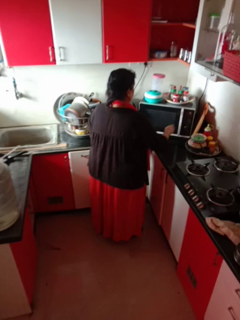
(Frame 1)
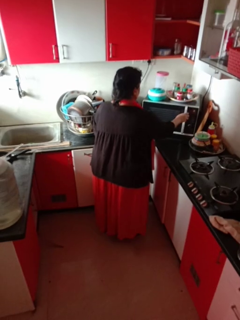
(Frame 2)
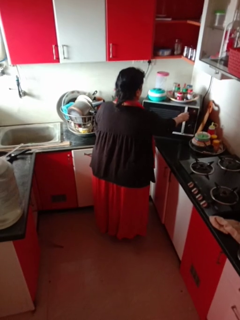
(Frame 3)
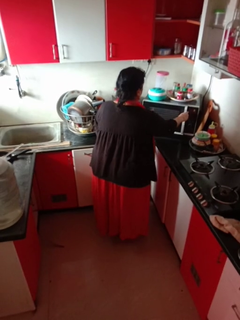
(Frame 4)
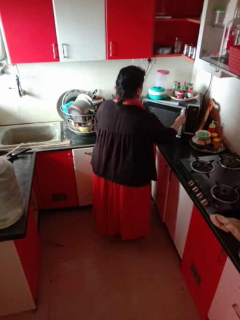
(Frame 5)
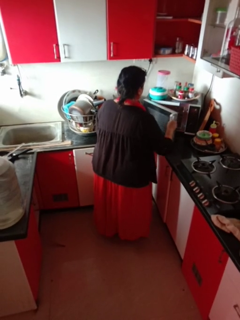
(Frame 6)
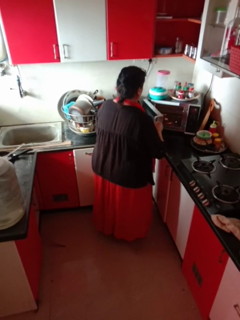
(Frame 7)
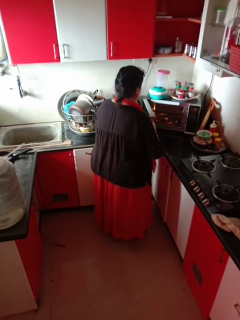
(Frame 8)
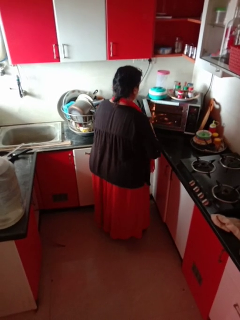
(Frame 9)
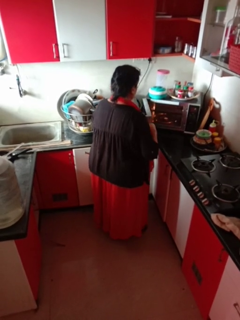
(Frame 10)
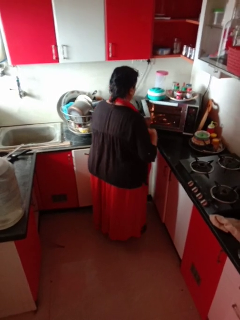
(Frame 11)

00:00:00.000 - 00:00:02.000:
person opens microwave

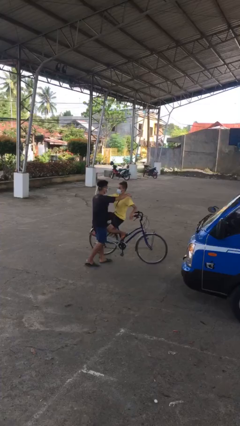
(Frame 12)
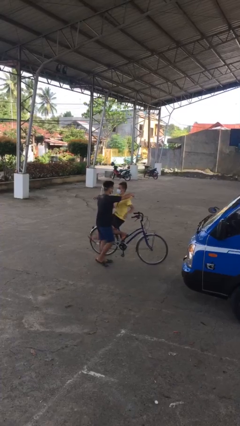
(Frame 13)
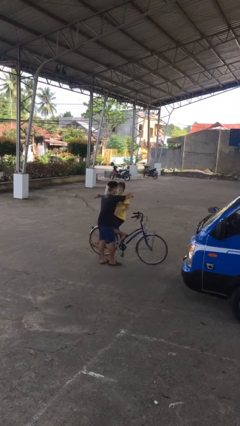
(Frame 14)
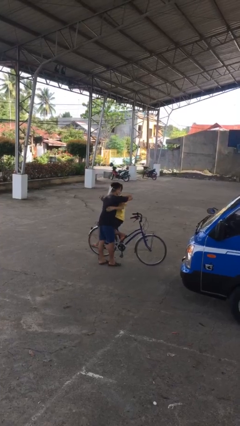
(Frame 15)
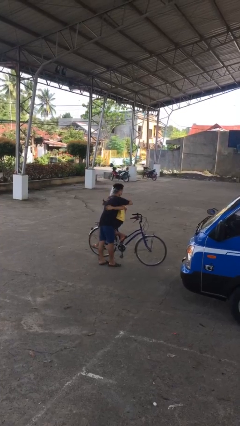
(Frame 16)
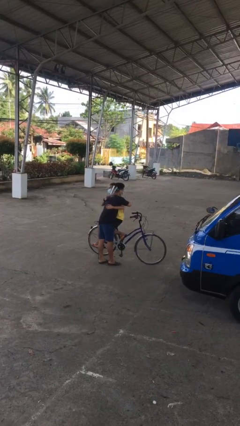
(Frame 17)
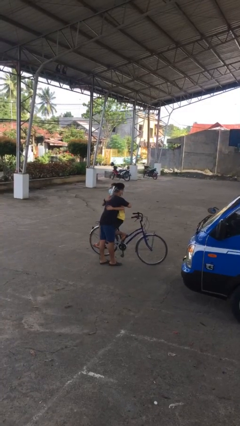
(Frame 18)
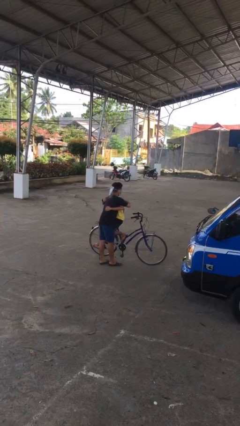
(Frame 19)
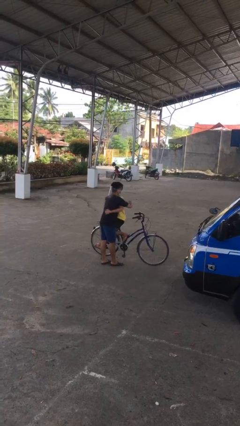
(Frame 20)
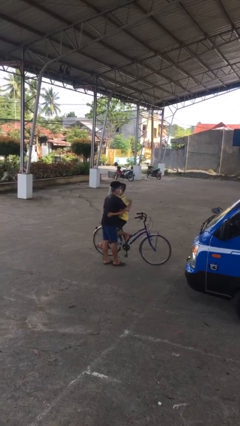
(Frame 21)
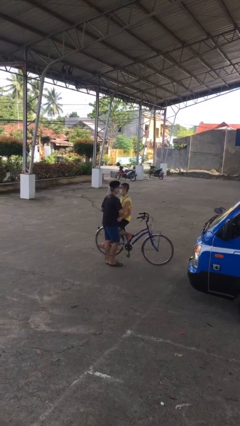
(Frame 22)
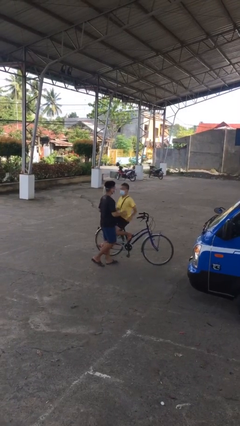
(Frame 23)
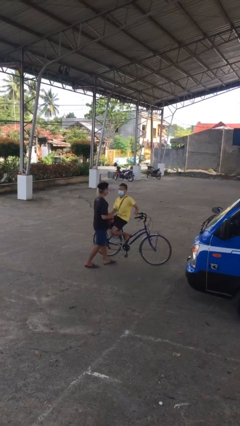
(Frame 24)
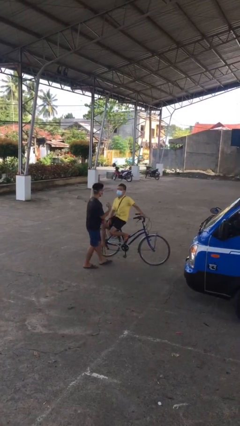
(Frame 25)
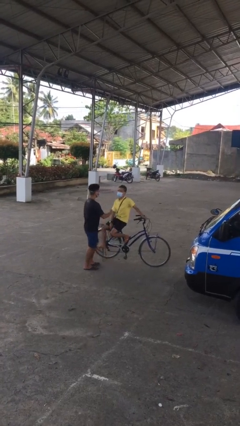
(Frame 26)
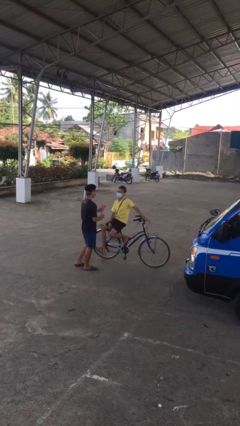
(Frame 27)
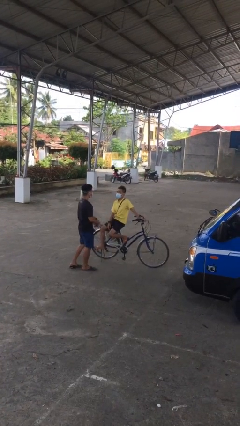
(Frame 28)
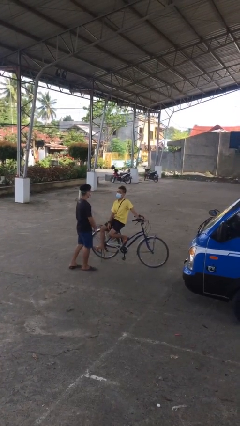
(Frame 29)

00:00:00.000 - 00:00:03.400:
person embraces person

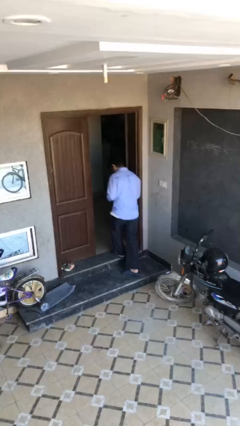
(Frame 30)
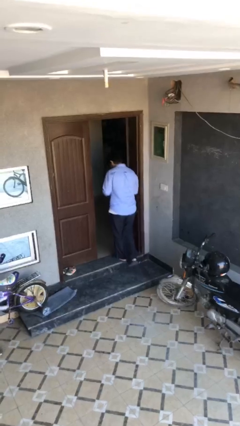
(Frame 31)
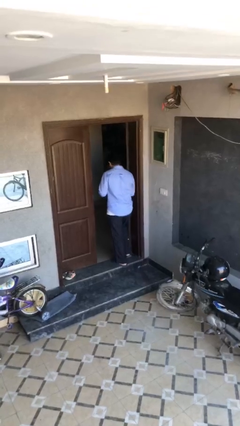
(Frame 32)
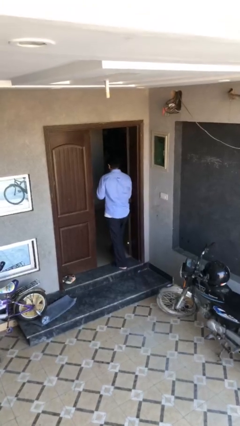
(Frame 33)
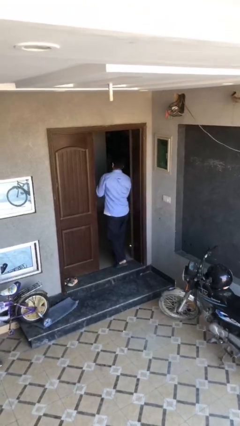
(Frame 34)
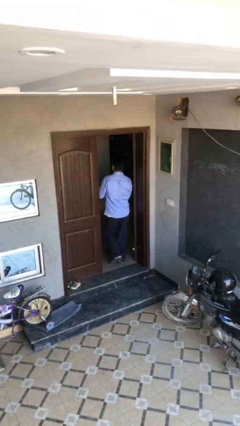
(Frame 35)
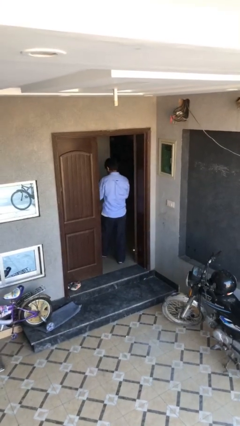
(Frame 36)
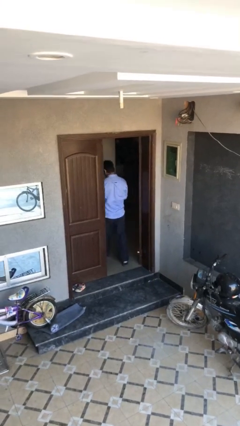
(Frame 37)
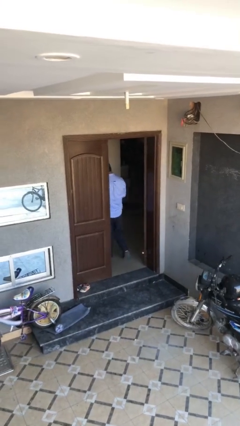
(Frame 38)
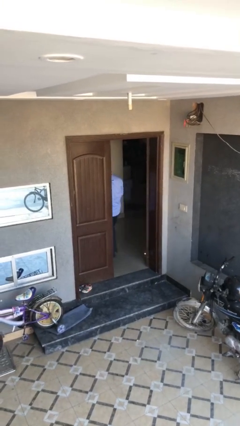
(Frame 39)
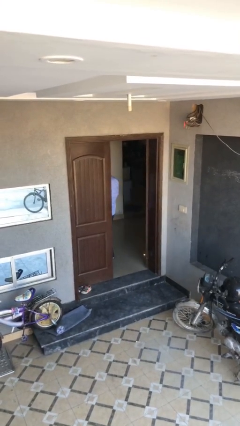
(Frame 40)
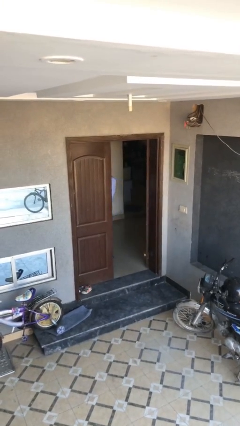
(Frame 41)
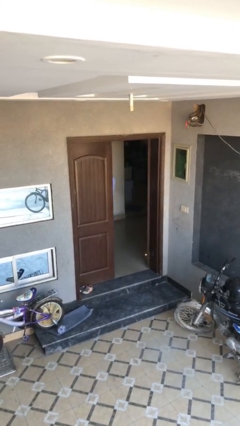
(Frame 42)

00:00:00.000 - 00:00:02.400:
person exits scene through structure

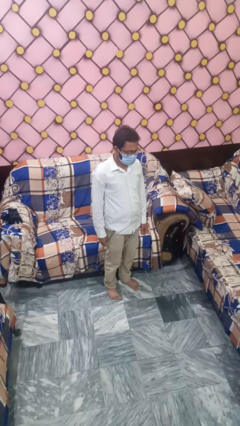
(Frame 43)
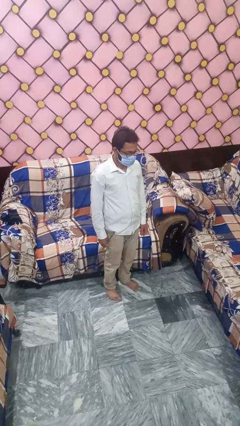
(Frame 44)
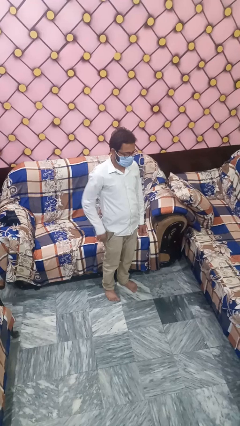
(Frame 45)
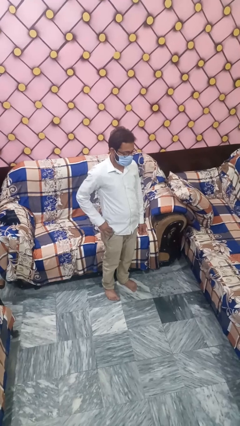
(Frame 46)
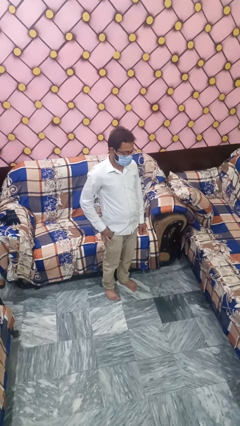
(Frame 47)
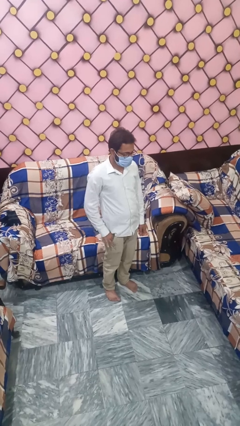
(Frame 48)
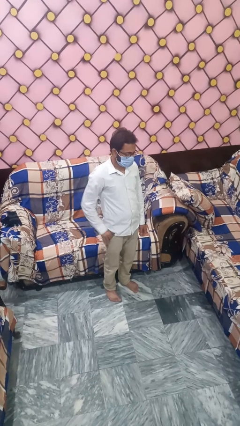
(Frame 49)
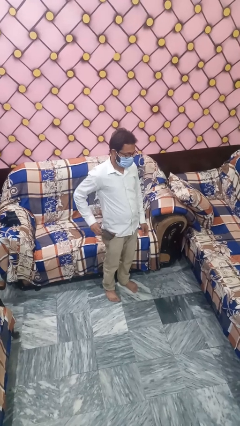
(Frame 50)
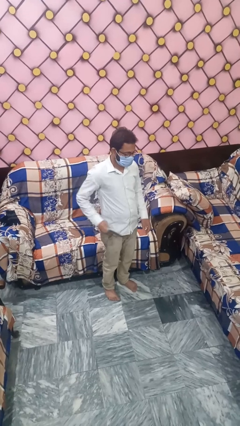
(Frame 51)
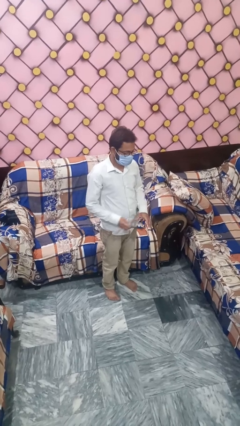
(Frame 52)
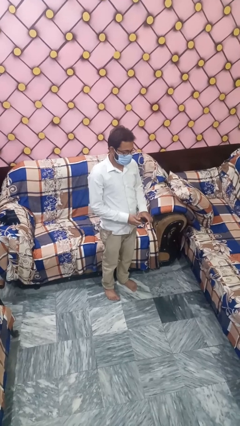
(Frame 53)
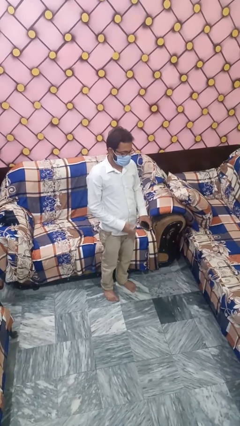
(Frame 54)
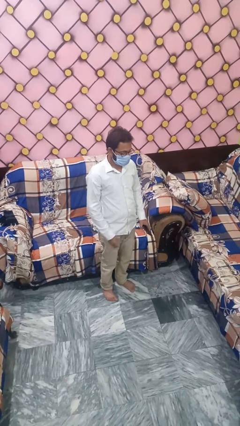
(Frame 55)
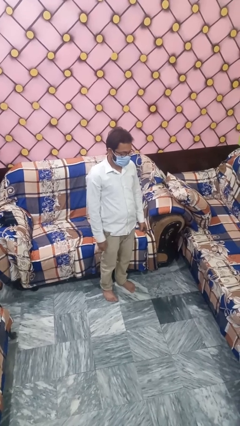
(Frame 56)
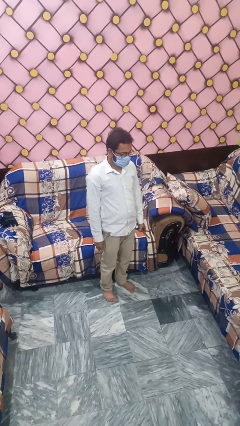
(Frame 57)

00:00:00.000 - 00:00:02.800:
person puts phone into pocket

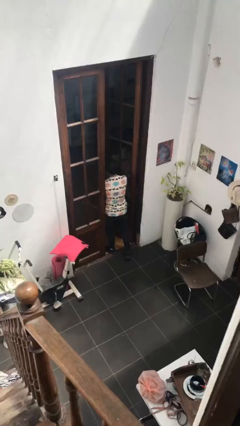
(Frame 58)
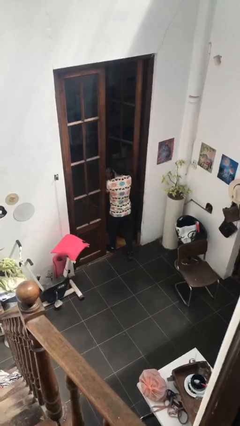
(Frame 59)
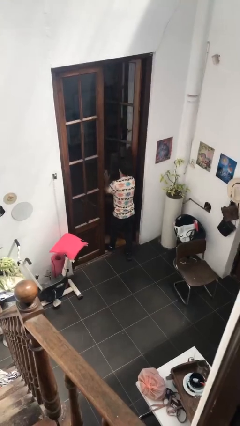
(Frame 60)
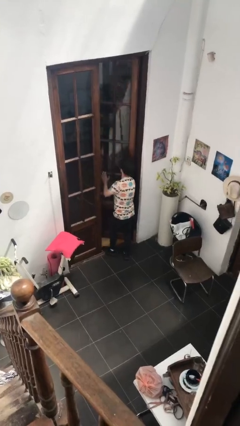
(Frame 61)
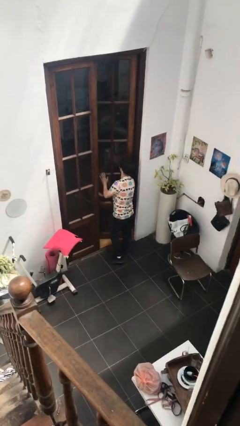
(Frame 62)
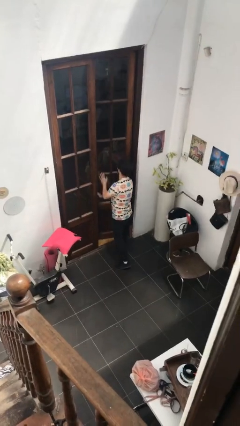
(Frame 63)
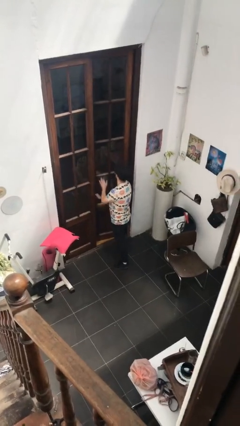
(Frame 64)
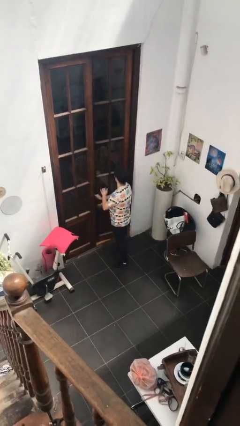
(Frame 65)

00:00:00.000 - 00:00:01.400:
person closes facility door

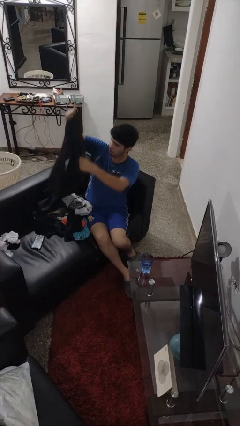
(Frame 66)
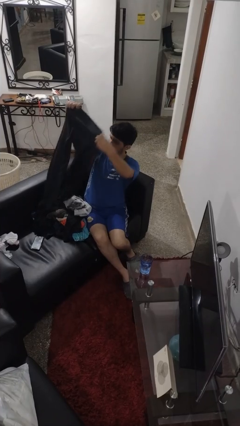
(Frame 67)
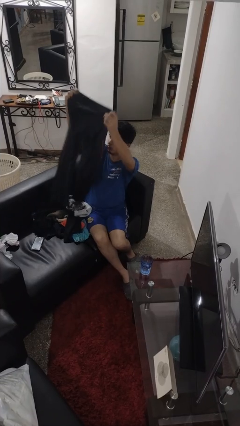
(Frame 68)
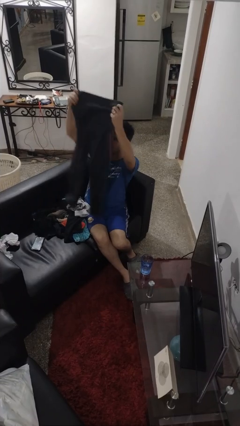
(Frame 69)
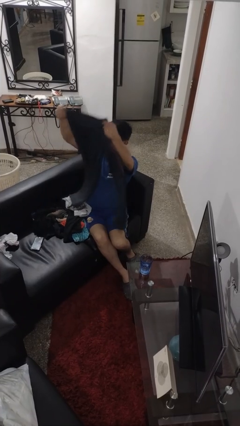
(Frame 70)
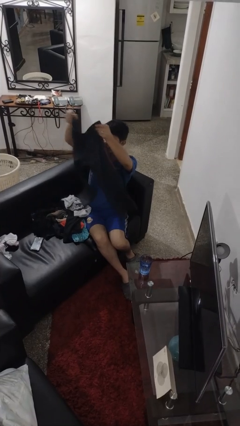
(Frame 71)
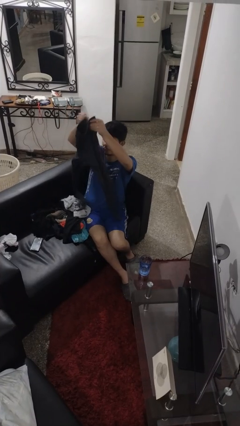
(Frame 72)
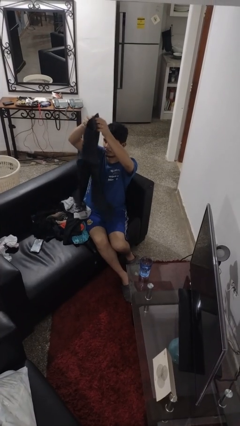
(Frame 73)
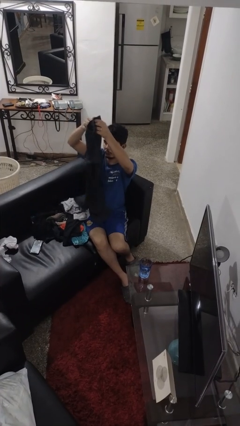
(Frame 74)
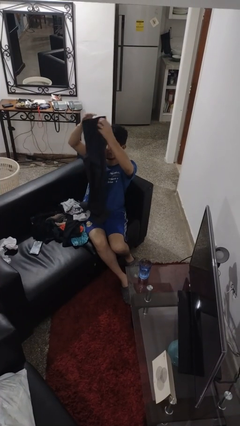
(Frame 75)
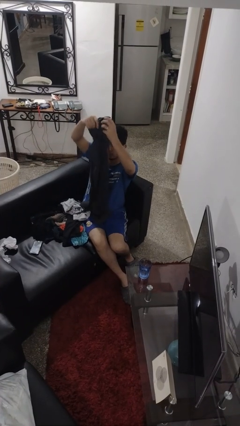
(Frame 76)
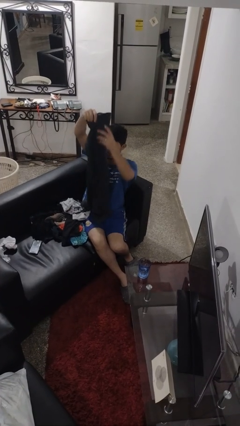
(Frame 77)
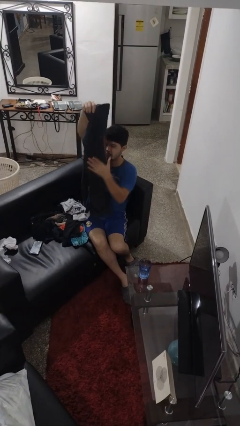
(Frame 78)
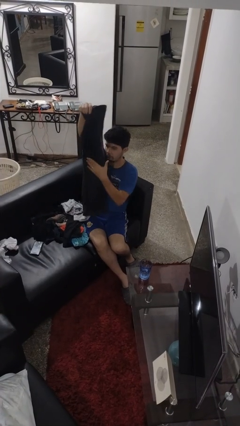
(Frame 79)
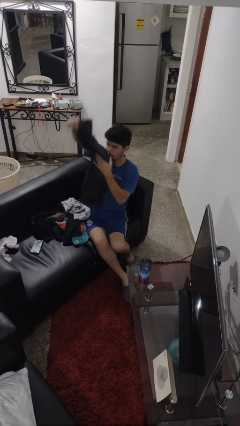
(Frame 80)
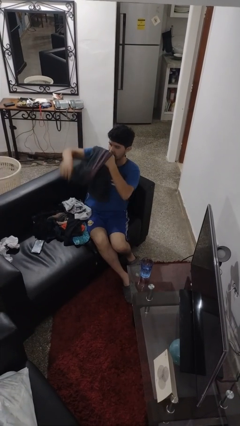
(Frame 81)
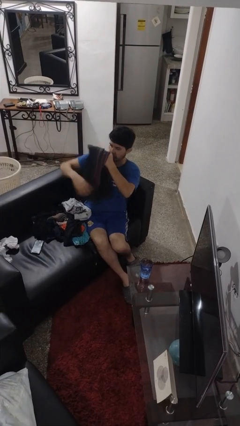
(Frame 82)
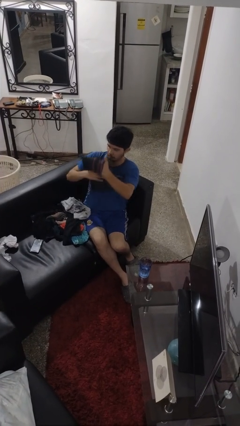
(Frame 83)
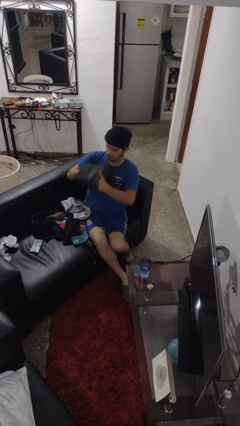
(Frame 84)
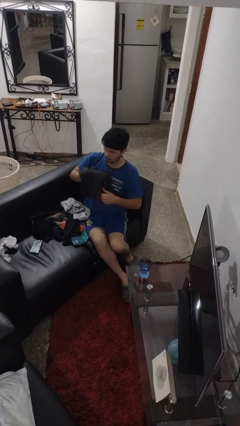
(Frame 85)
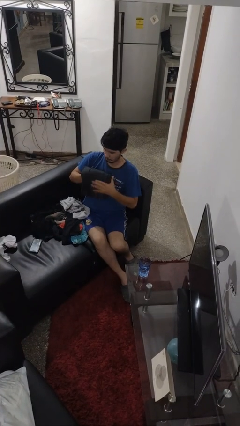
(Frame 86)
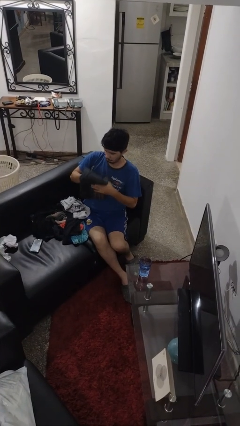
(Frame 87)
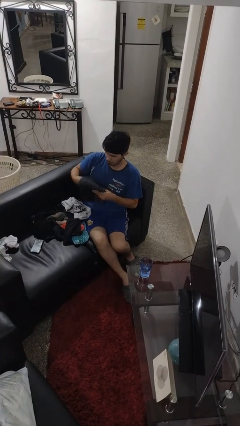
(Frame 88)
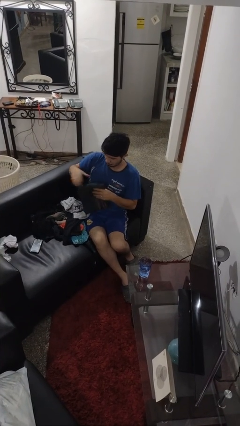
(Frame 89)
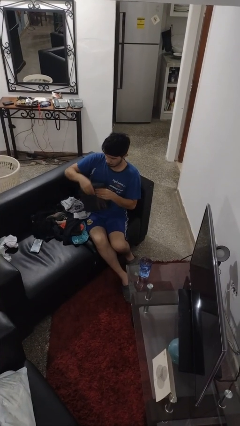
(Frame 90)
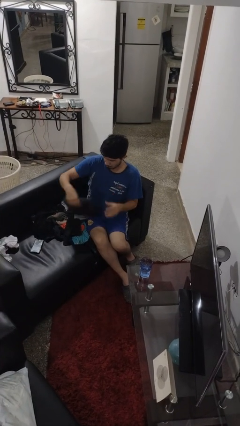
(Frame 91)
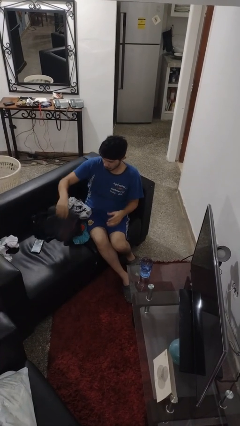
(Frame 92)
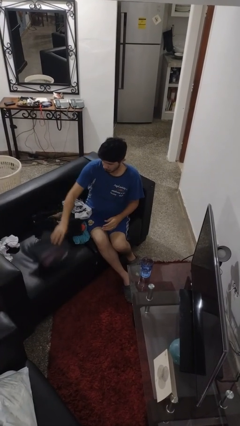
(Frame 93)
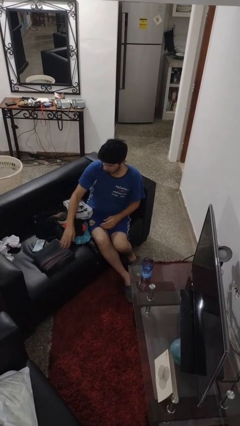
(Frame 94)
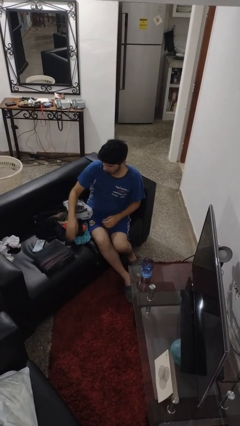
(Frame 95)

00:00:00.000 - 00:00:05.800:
person folds pants

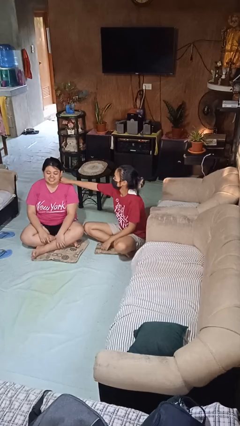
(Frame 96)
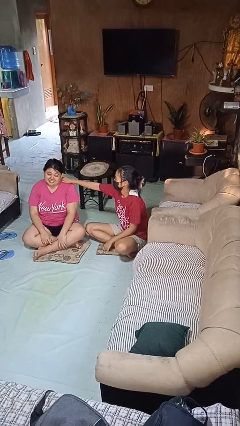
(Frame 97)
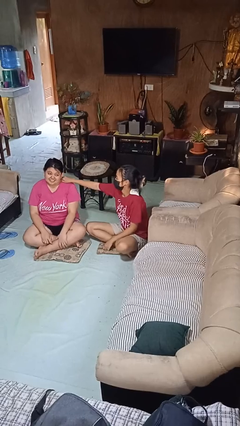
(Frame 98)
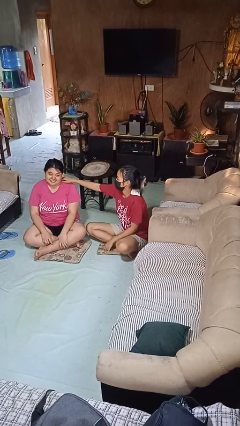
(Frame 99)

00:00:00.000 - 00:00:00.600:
person tickles person
